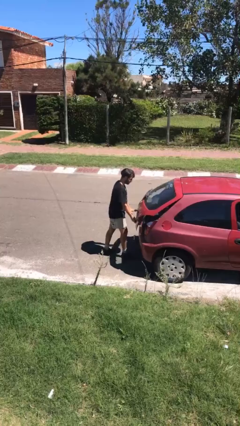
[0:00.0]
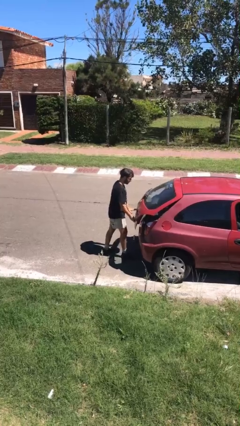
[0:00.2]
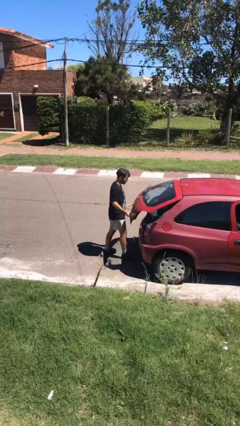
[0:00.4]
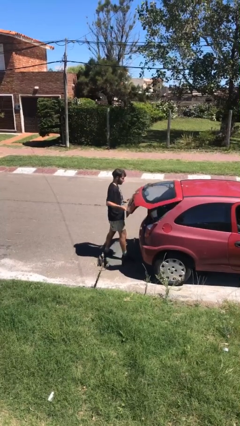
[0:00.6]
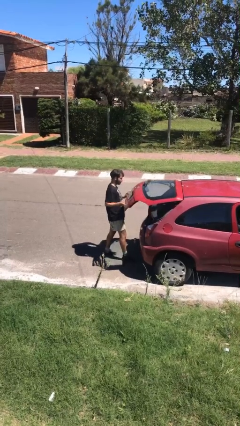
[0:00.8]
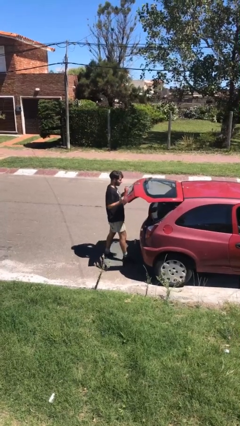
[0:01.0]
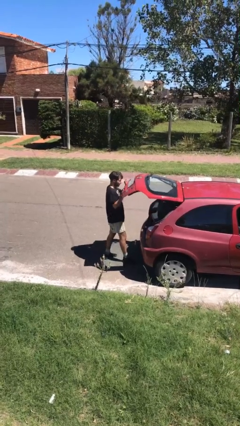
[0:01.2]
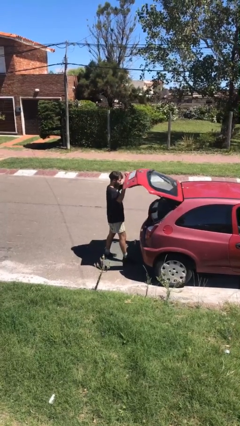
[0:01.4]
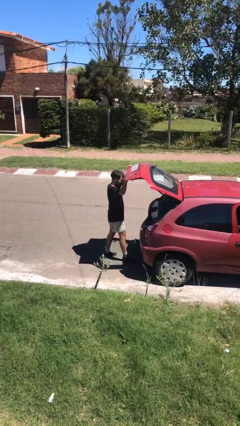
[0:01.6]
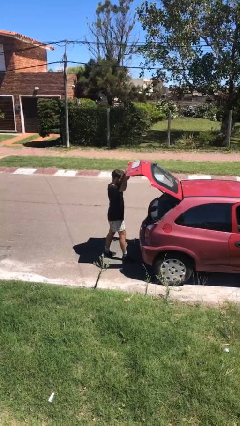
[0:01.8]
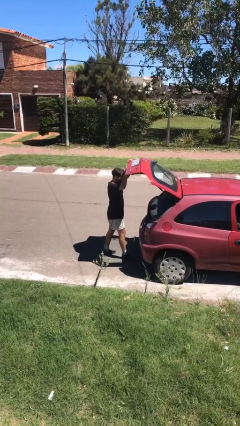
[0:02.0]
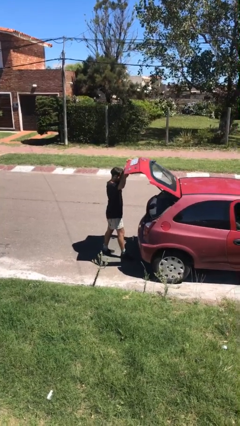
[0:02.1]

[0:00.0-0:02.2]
person opens car trunk

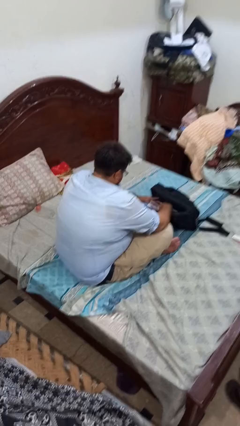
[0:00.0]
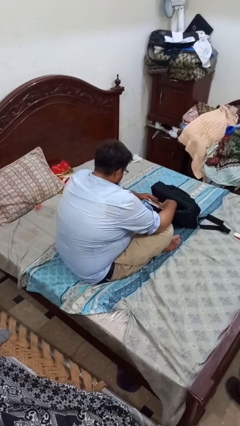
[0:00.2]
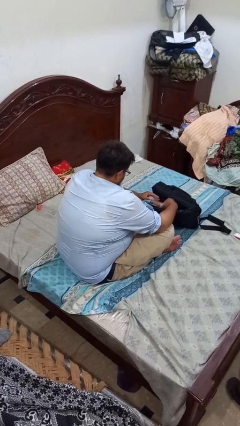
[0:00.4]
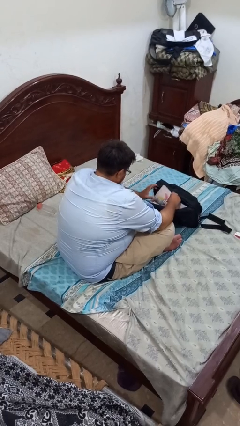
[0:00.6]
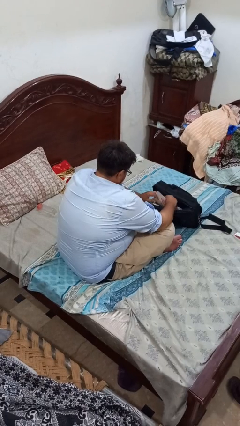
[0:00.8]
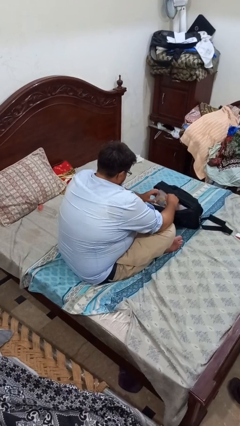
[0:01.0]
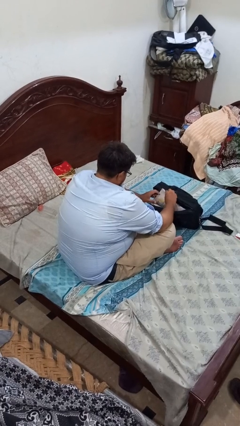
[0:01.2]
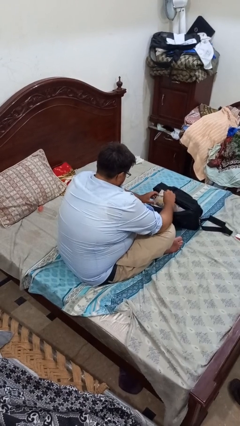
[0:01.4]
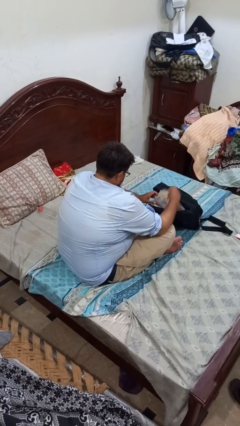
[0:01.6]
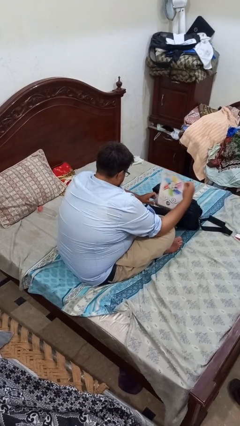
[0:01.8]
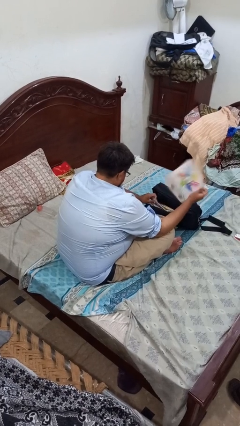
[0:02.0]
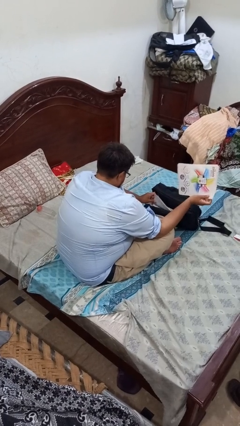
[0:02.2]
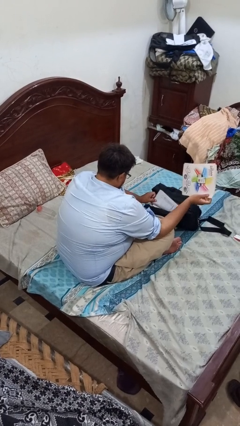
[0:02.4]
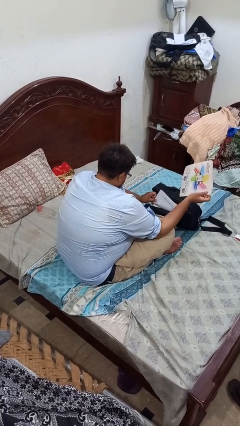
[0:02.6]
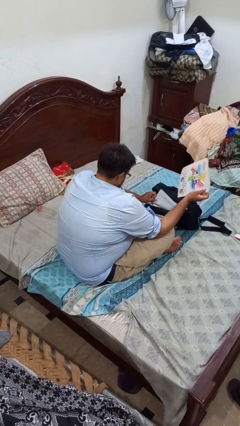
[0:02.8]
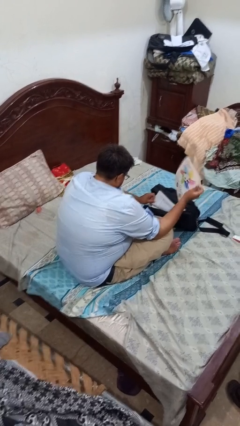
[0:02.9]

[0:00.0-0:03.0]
person searches in bag

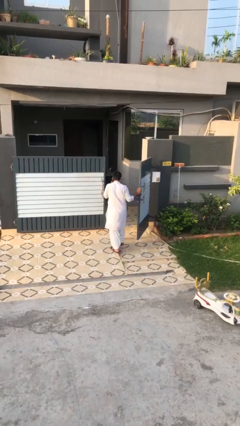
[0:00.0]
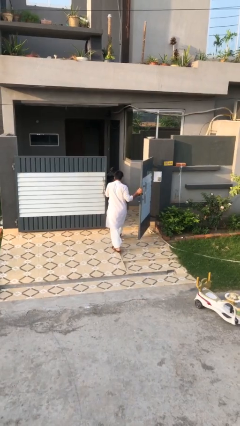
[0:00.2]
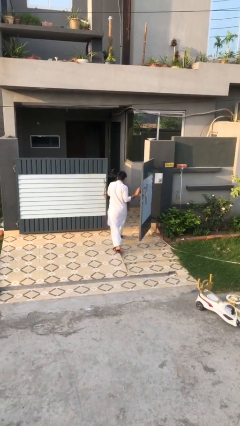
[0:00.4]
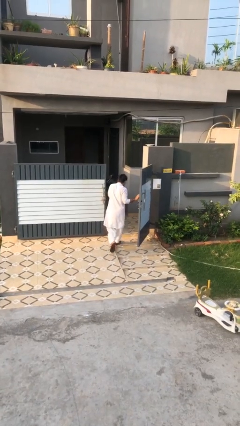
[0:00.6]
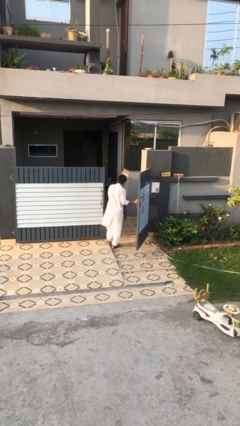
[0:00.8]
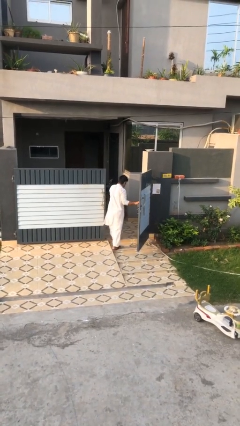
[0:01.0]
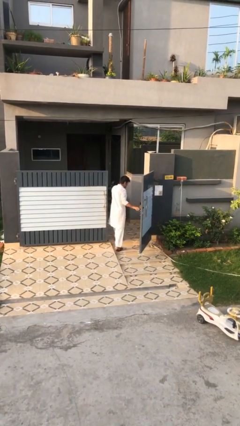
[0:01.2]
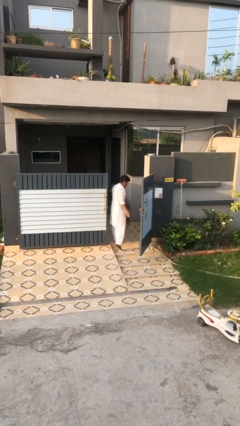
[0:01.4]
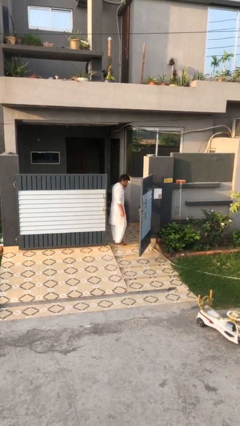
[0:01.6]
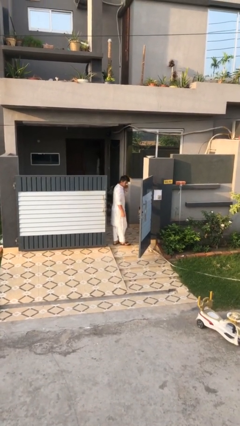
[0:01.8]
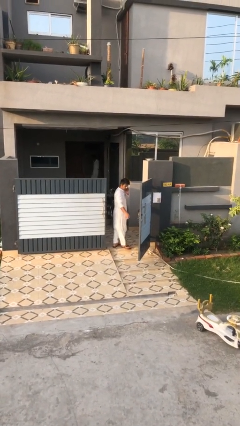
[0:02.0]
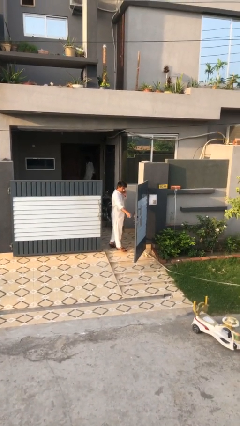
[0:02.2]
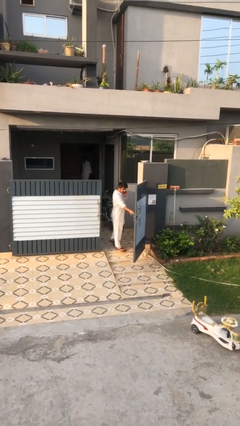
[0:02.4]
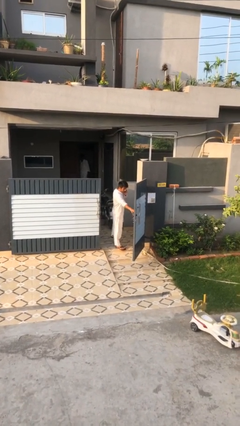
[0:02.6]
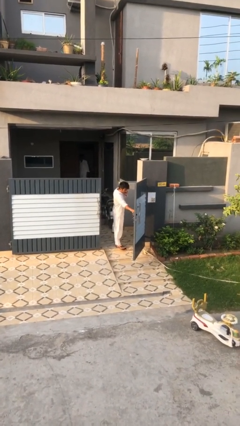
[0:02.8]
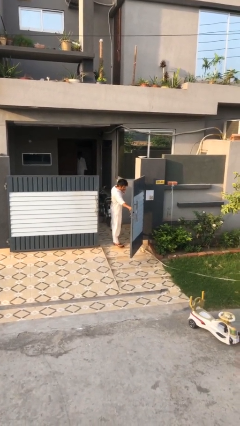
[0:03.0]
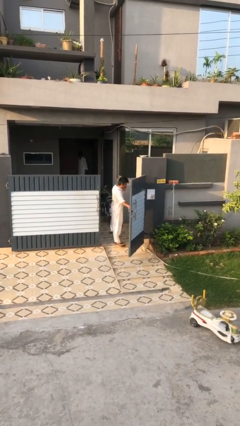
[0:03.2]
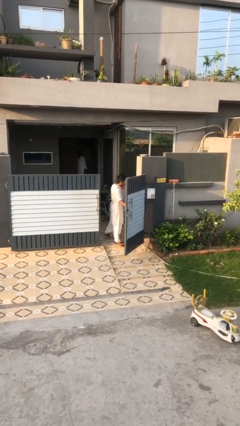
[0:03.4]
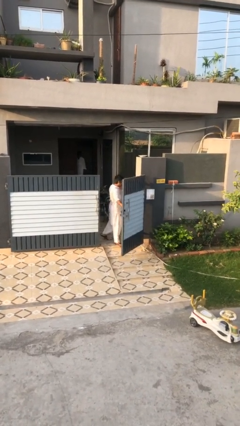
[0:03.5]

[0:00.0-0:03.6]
person exits scene through structure

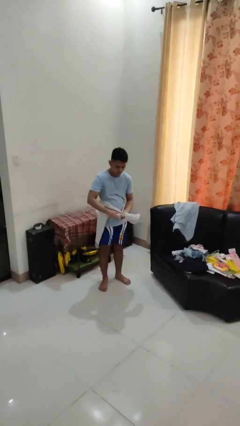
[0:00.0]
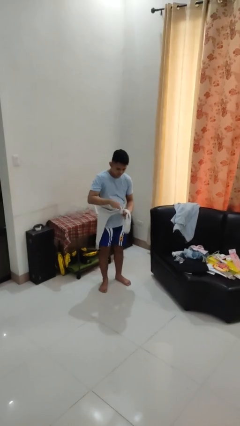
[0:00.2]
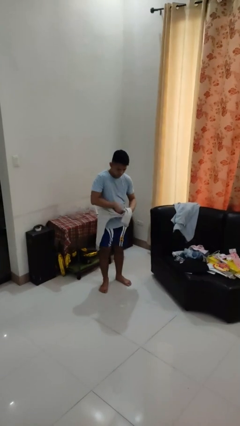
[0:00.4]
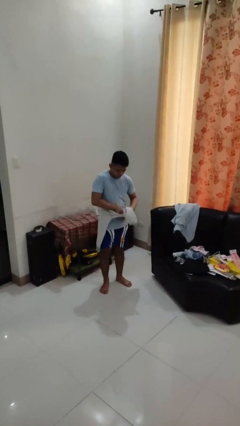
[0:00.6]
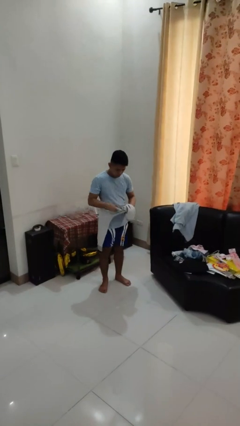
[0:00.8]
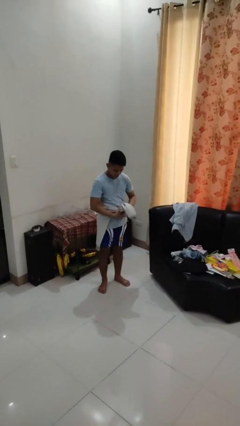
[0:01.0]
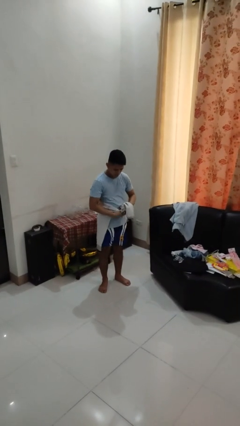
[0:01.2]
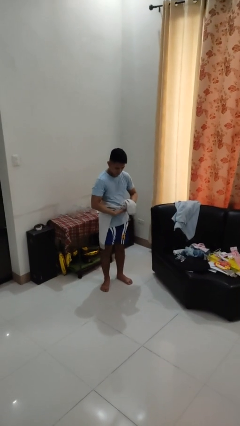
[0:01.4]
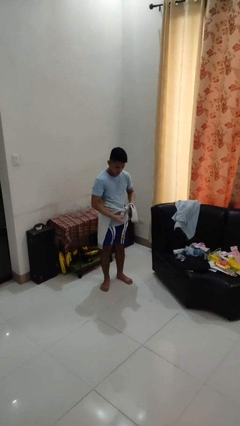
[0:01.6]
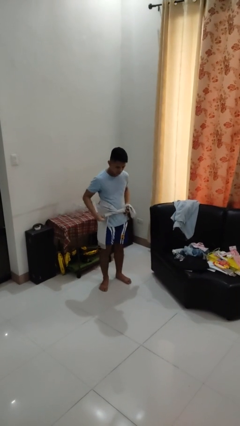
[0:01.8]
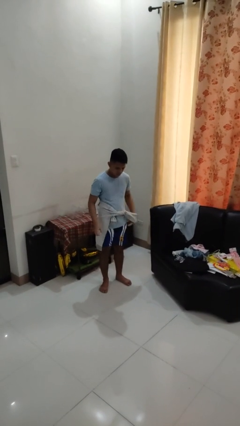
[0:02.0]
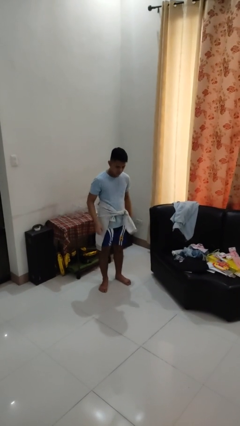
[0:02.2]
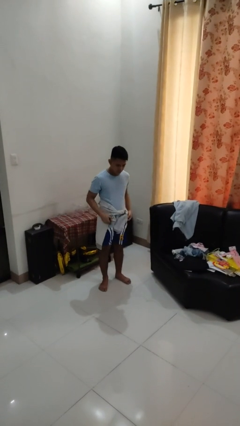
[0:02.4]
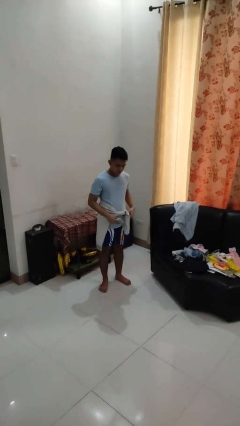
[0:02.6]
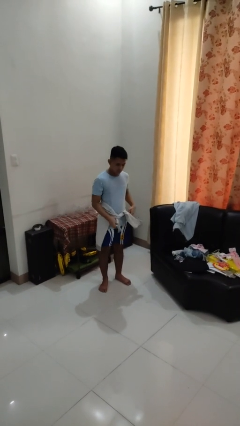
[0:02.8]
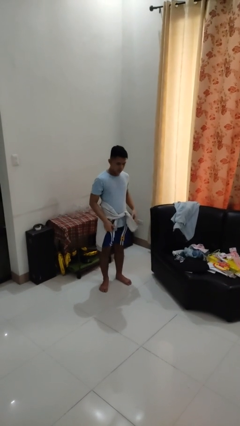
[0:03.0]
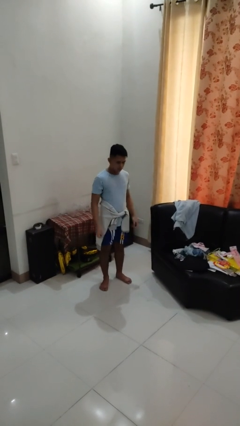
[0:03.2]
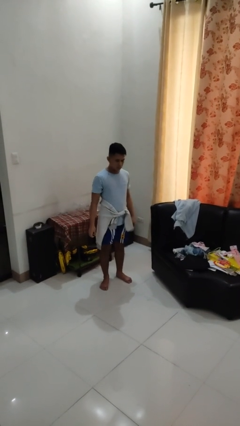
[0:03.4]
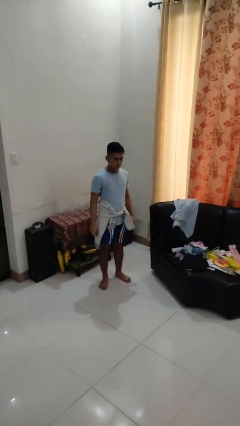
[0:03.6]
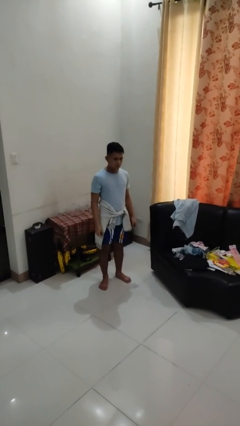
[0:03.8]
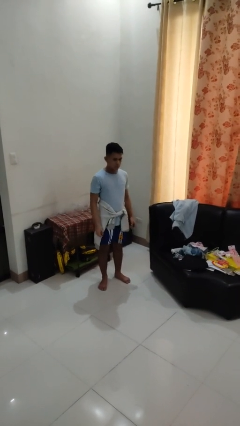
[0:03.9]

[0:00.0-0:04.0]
person ties jacket around waist

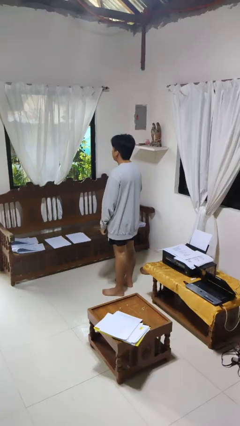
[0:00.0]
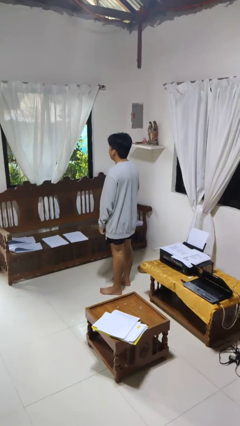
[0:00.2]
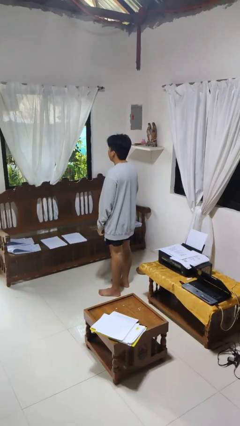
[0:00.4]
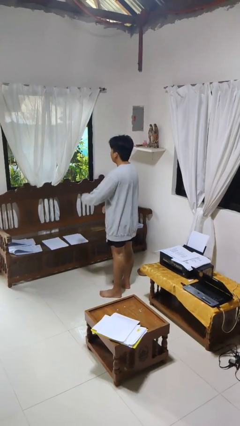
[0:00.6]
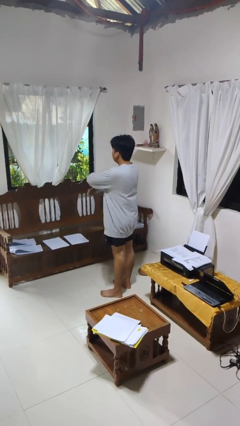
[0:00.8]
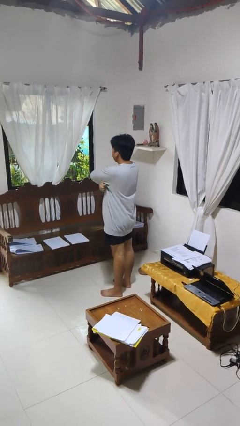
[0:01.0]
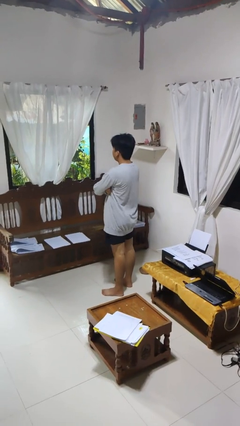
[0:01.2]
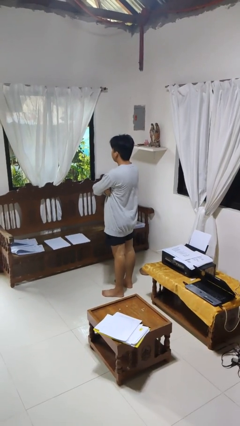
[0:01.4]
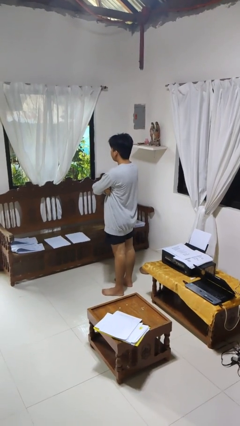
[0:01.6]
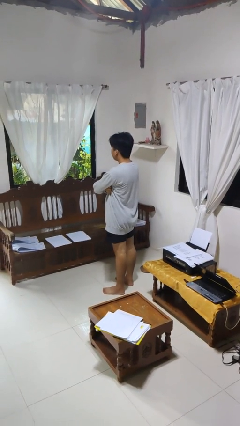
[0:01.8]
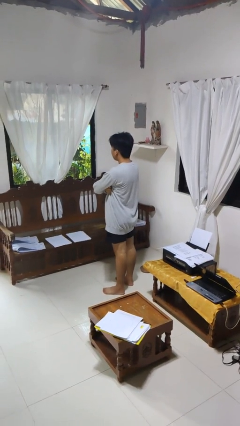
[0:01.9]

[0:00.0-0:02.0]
person gestures arms x

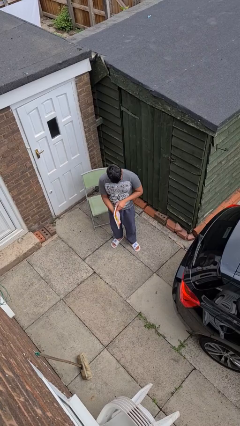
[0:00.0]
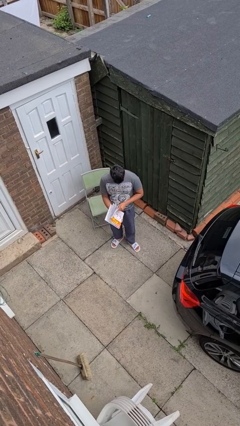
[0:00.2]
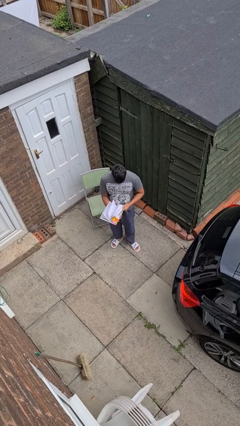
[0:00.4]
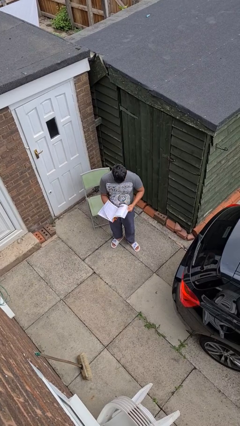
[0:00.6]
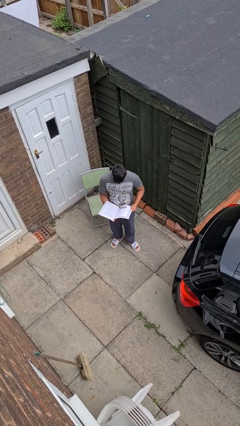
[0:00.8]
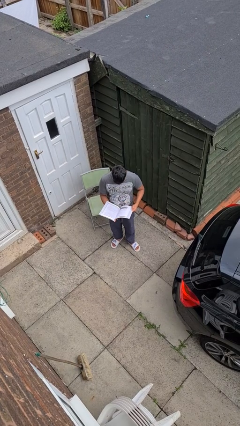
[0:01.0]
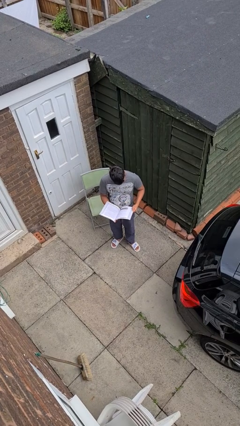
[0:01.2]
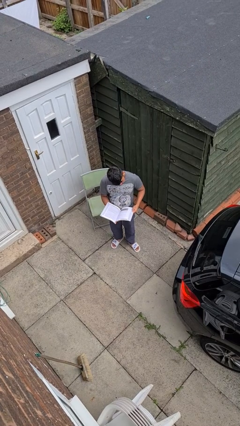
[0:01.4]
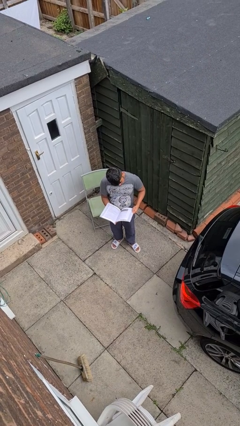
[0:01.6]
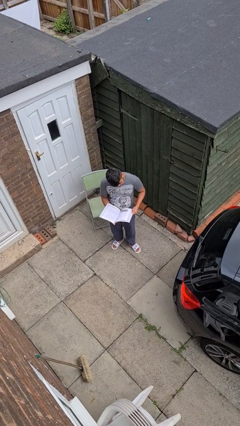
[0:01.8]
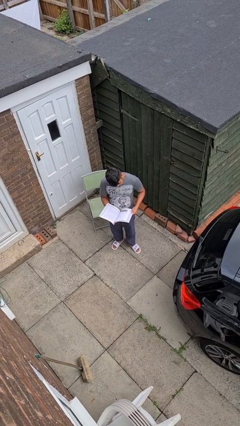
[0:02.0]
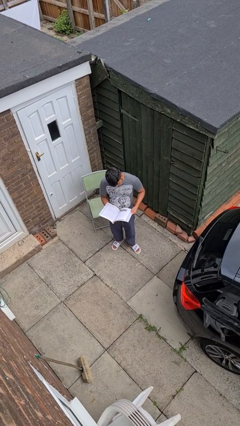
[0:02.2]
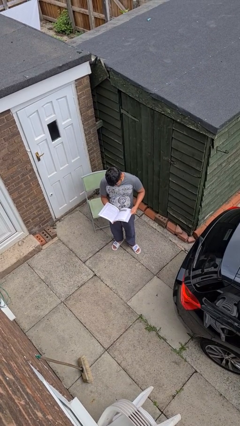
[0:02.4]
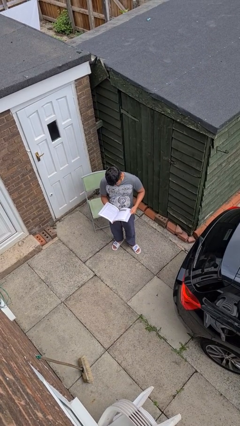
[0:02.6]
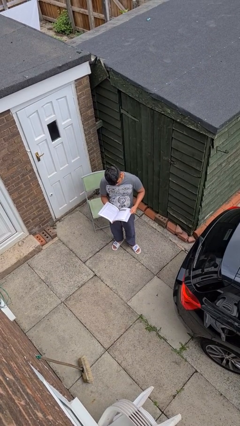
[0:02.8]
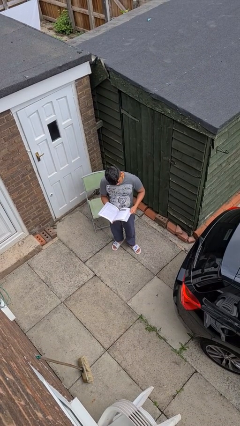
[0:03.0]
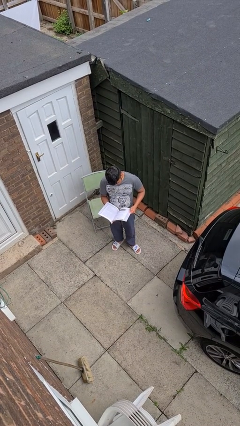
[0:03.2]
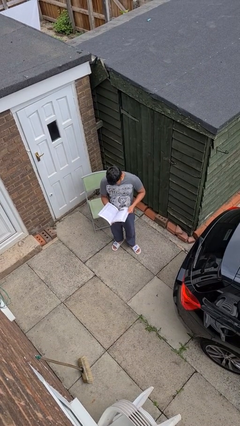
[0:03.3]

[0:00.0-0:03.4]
person reads book
